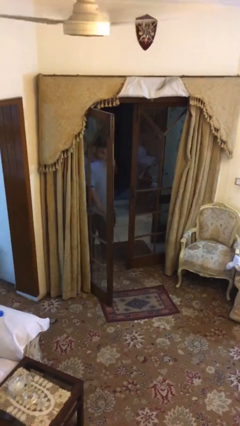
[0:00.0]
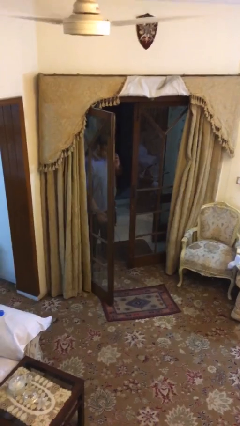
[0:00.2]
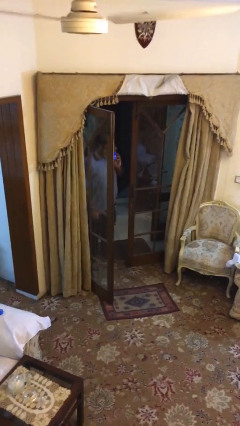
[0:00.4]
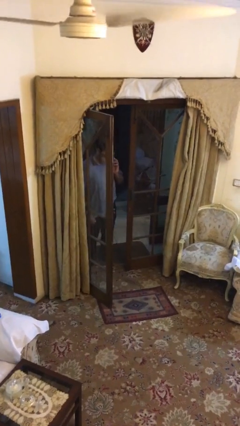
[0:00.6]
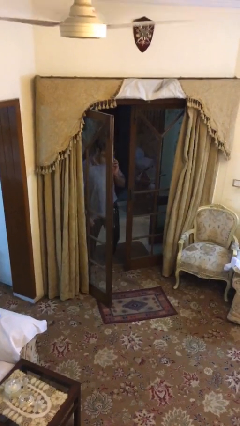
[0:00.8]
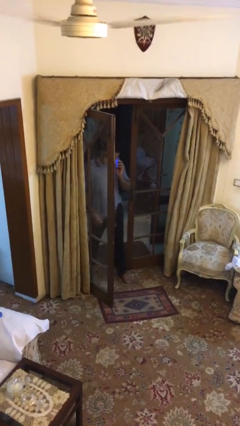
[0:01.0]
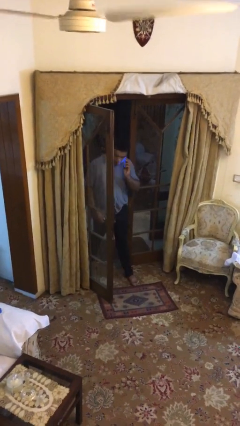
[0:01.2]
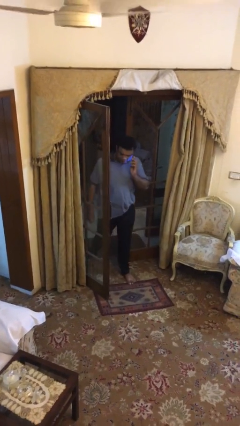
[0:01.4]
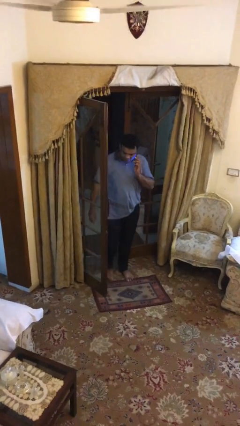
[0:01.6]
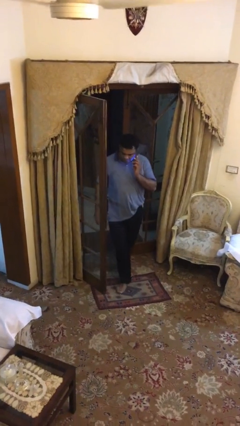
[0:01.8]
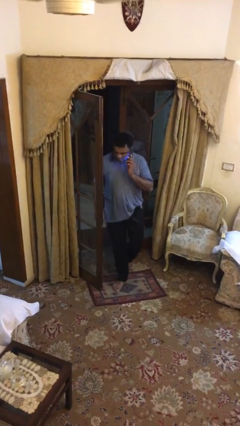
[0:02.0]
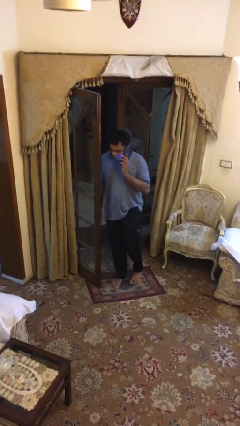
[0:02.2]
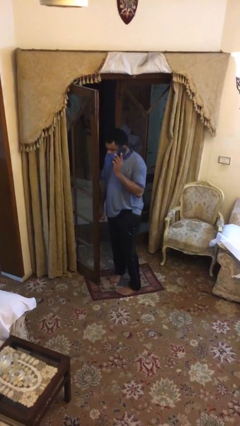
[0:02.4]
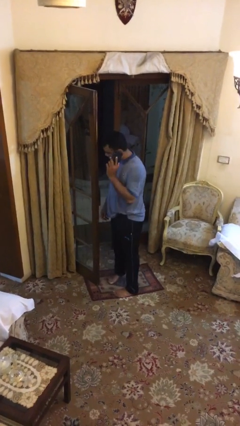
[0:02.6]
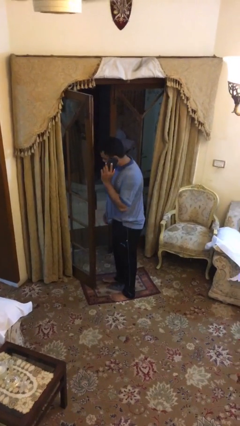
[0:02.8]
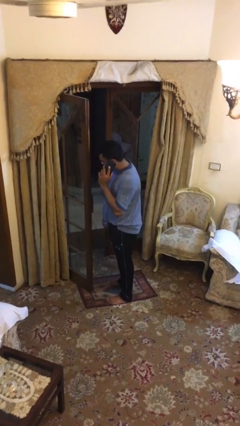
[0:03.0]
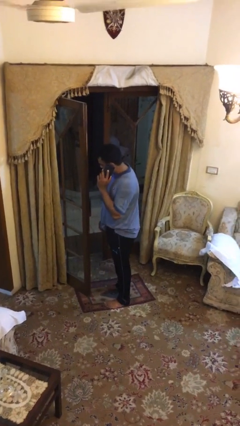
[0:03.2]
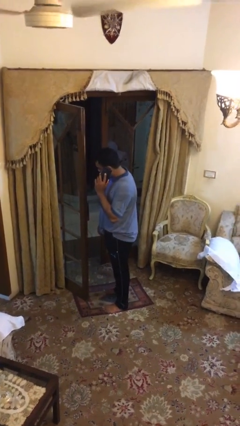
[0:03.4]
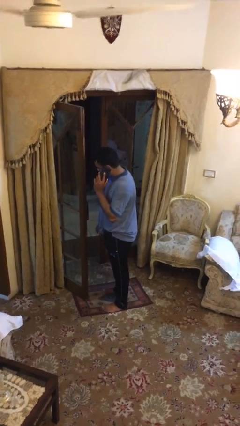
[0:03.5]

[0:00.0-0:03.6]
person enters scene through structure

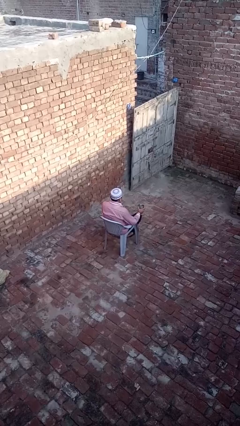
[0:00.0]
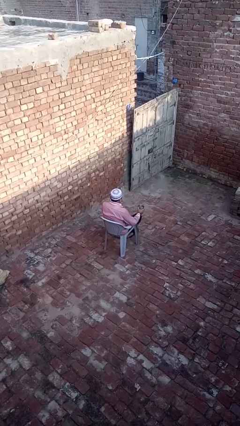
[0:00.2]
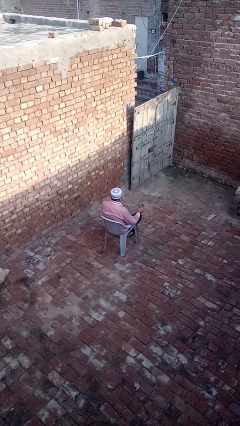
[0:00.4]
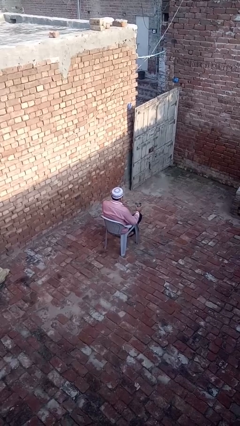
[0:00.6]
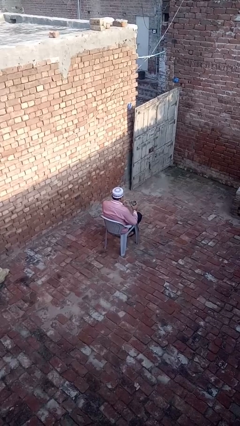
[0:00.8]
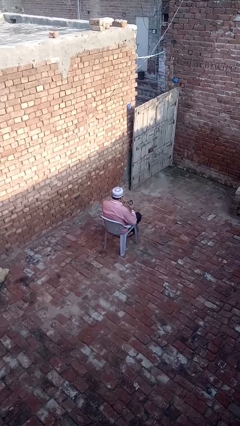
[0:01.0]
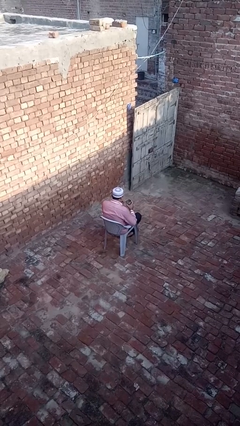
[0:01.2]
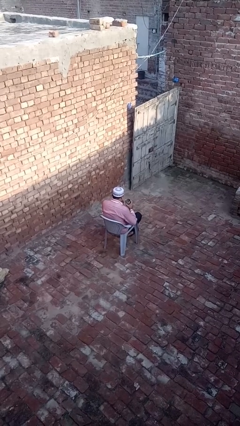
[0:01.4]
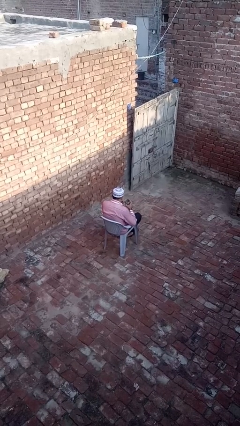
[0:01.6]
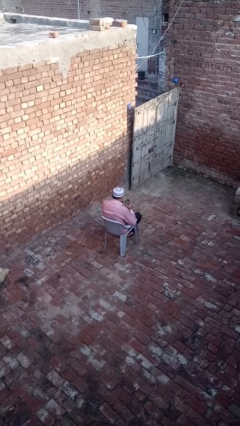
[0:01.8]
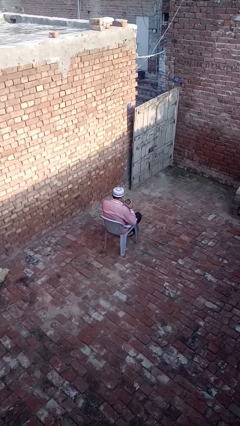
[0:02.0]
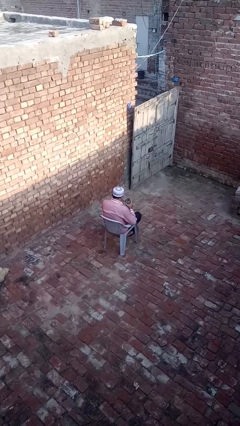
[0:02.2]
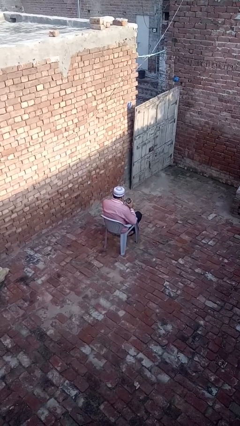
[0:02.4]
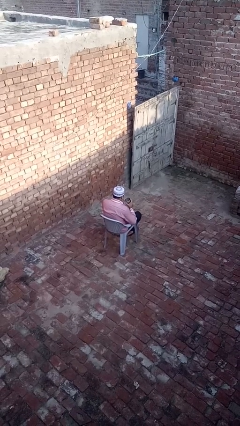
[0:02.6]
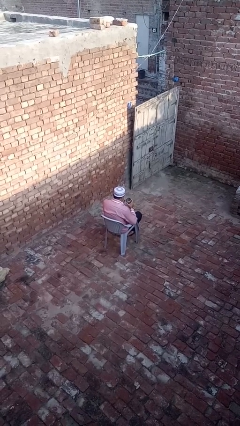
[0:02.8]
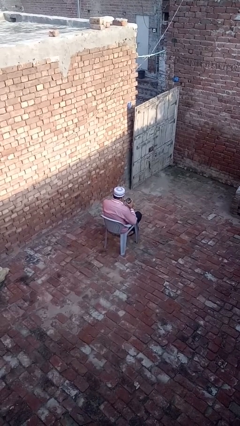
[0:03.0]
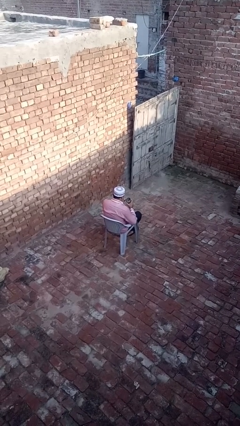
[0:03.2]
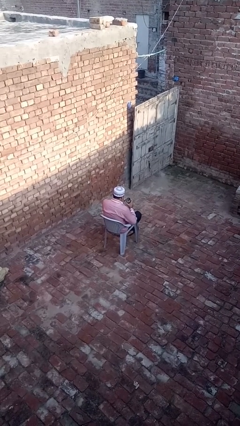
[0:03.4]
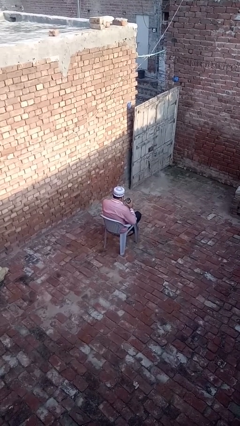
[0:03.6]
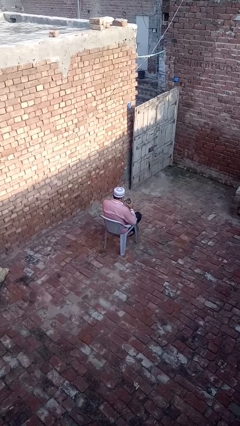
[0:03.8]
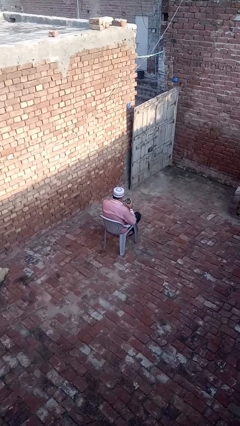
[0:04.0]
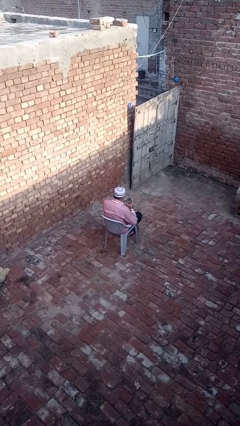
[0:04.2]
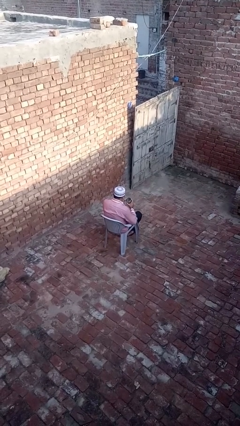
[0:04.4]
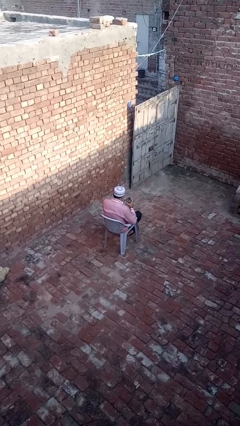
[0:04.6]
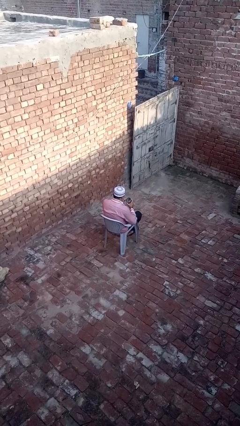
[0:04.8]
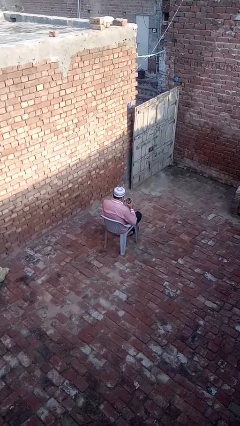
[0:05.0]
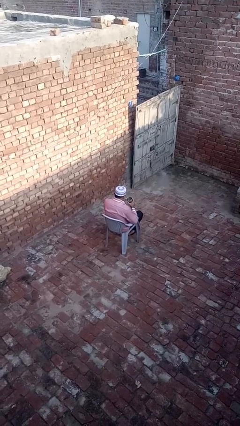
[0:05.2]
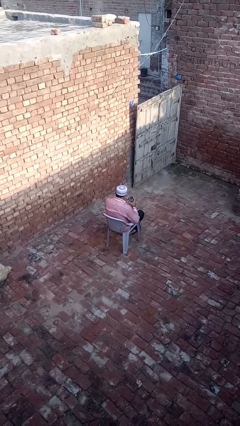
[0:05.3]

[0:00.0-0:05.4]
person drinks from straw

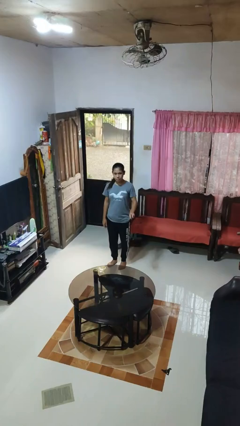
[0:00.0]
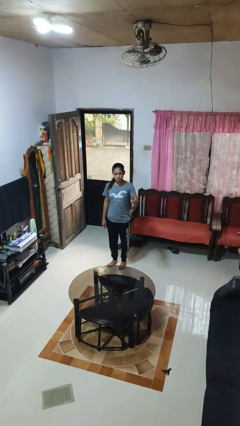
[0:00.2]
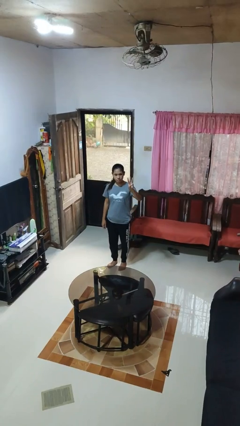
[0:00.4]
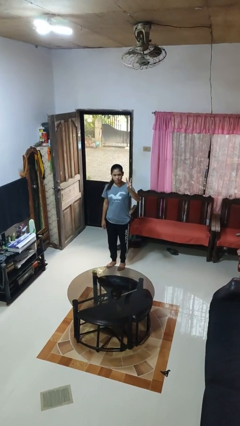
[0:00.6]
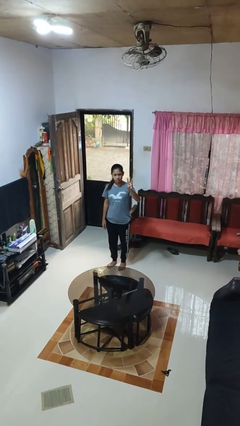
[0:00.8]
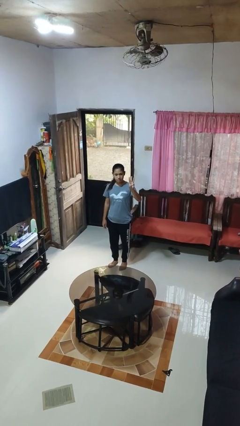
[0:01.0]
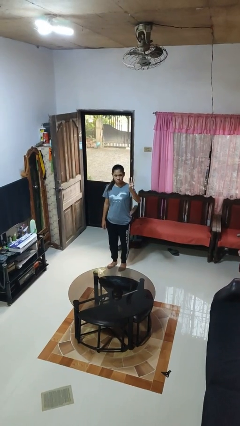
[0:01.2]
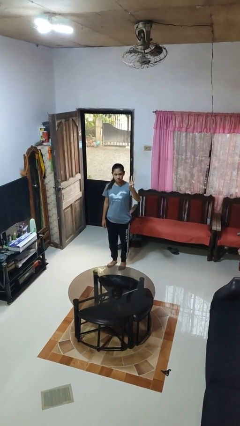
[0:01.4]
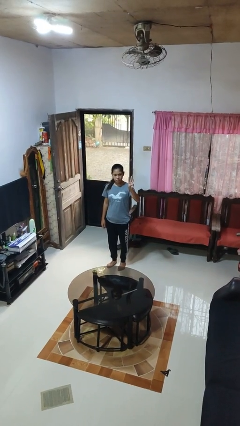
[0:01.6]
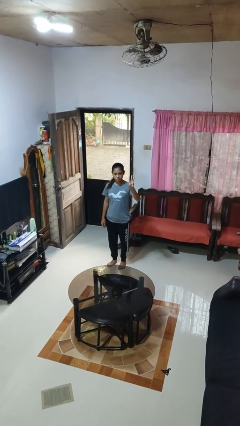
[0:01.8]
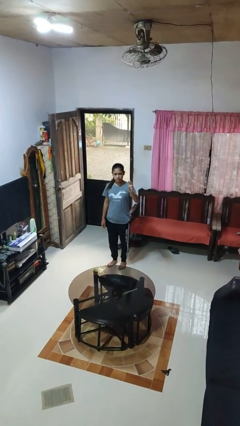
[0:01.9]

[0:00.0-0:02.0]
person gestures number three

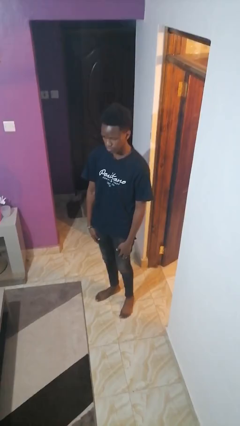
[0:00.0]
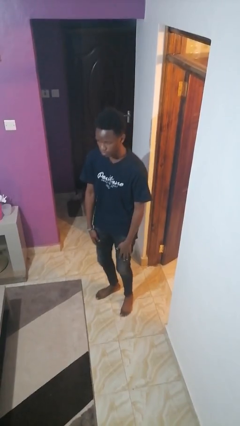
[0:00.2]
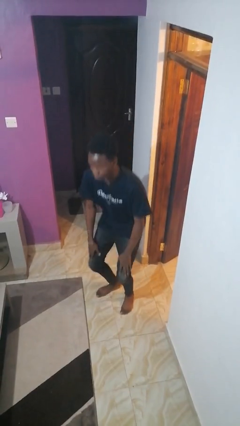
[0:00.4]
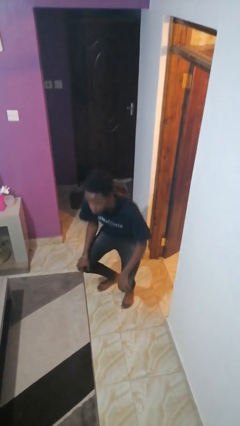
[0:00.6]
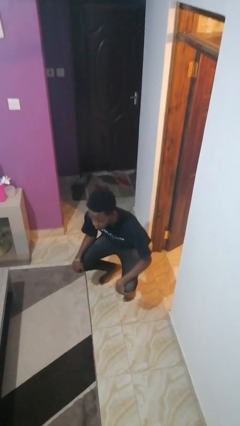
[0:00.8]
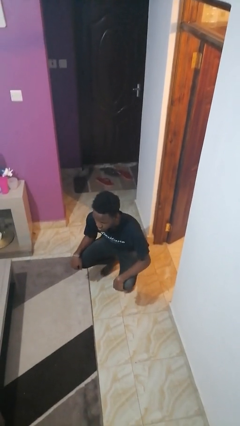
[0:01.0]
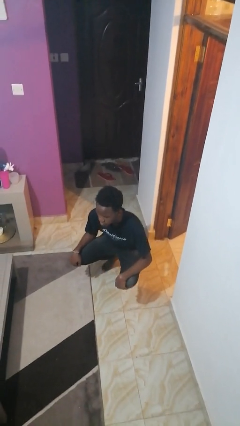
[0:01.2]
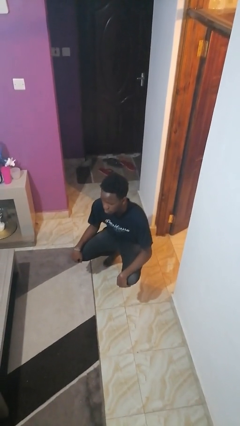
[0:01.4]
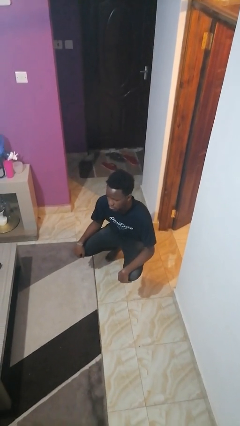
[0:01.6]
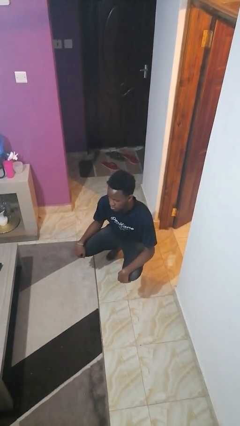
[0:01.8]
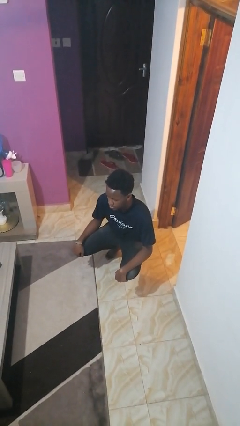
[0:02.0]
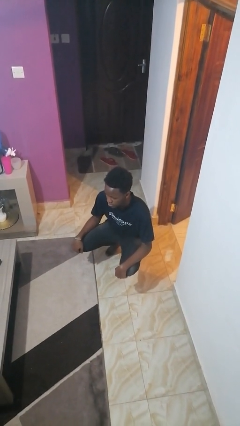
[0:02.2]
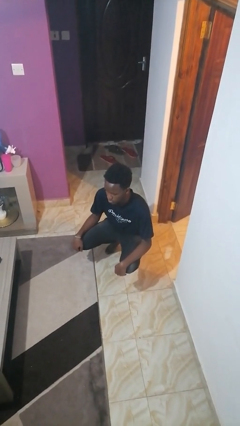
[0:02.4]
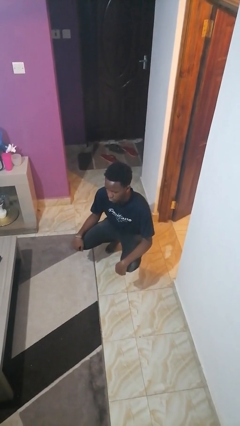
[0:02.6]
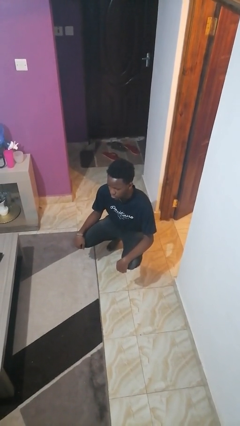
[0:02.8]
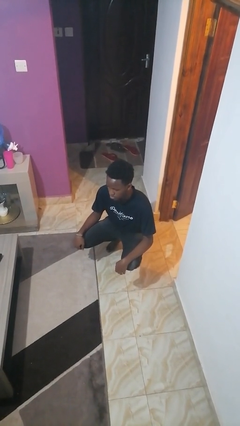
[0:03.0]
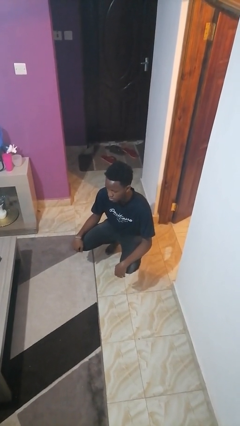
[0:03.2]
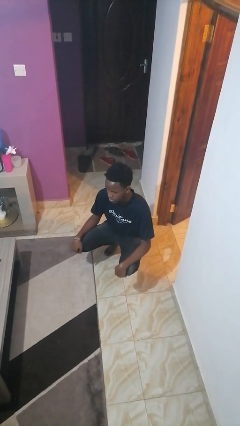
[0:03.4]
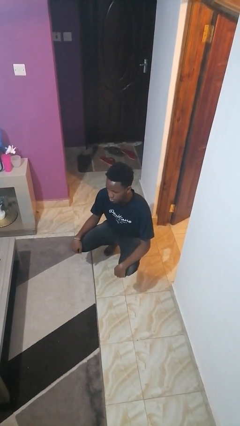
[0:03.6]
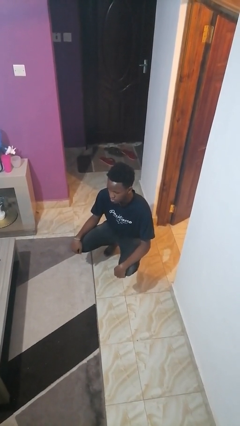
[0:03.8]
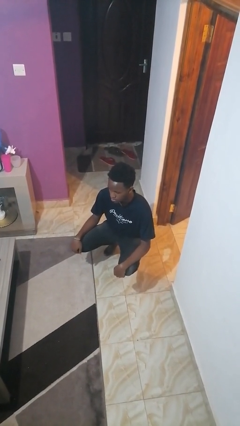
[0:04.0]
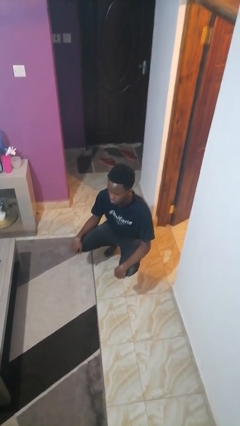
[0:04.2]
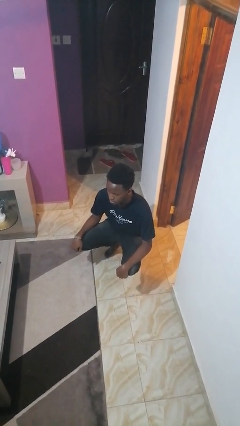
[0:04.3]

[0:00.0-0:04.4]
person squats

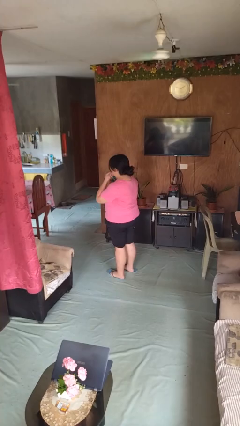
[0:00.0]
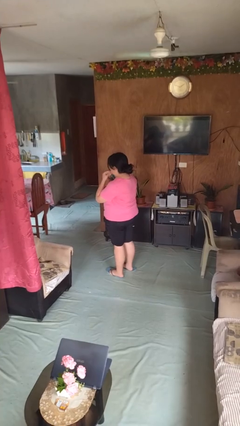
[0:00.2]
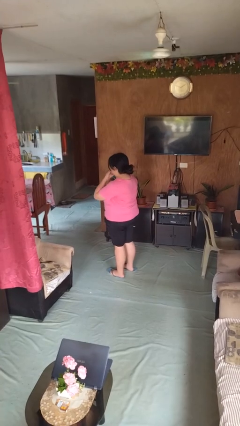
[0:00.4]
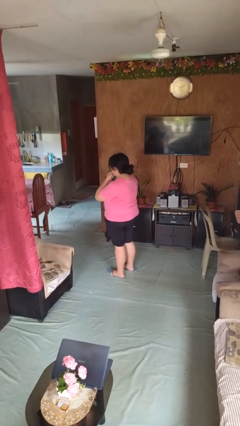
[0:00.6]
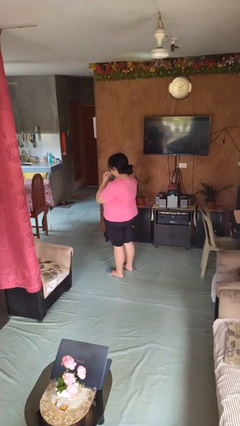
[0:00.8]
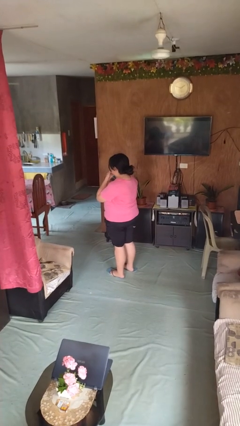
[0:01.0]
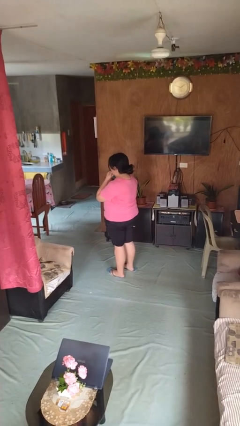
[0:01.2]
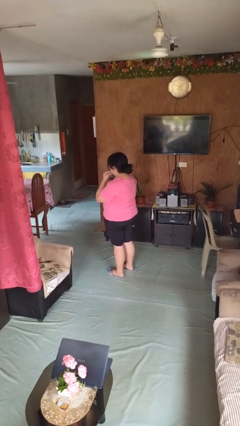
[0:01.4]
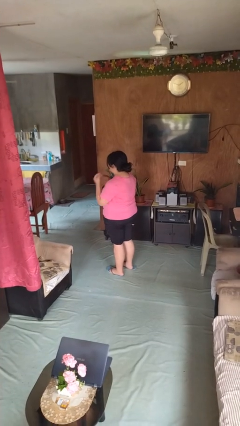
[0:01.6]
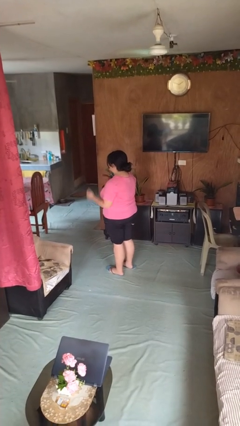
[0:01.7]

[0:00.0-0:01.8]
person strokes chin

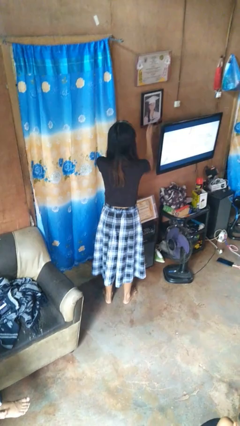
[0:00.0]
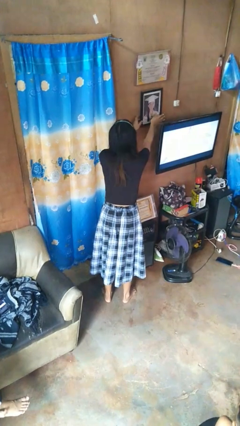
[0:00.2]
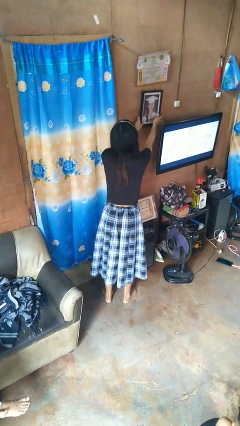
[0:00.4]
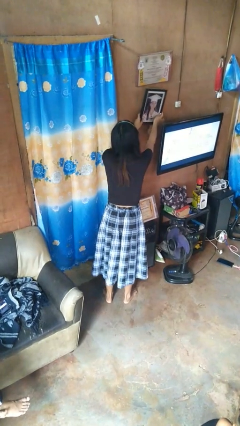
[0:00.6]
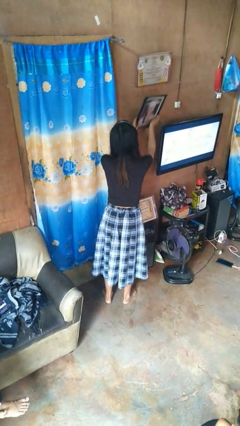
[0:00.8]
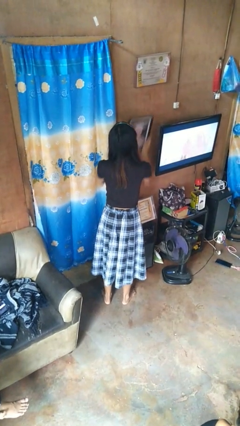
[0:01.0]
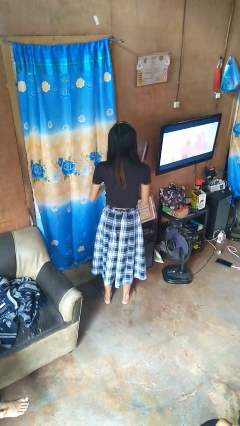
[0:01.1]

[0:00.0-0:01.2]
person takes down picture frame
